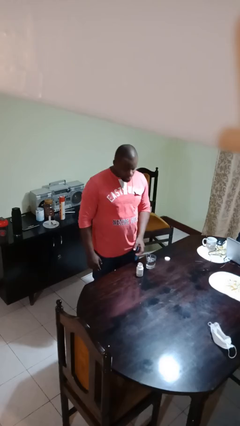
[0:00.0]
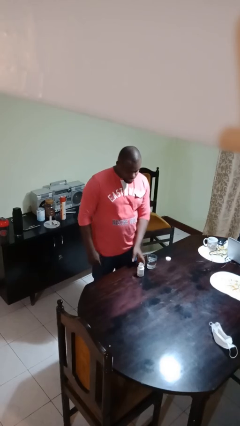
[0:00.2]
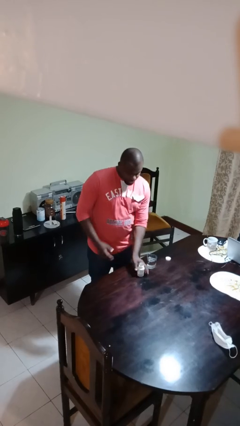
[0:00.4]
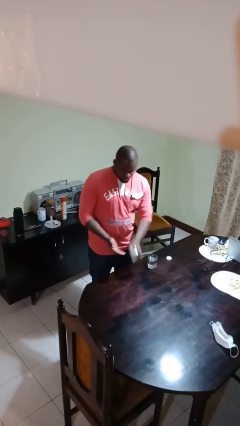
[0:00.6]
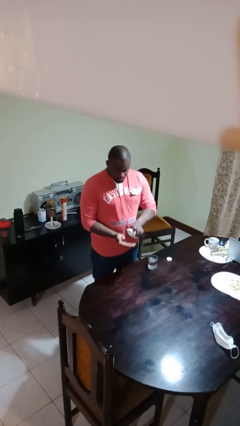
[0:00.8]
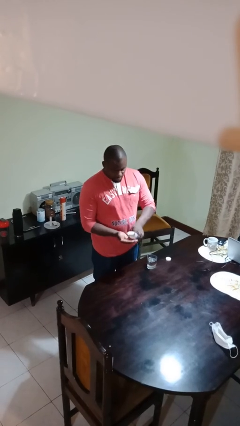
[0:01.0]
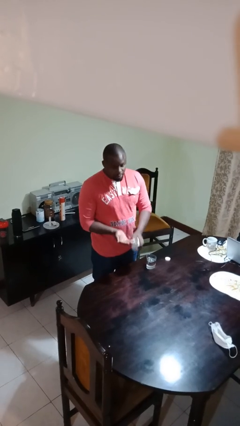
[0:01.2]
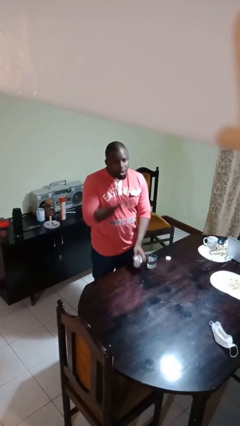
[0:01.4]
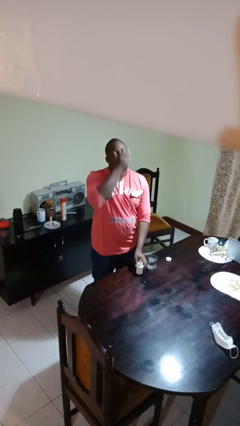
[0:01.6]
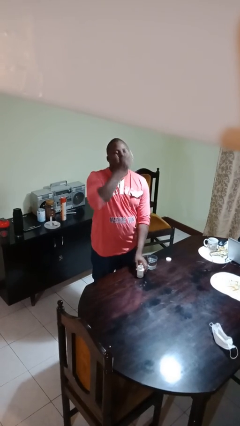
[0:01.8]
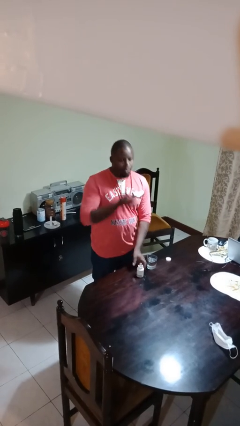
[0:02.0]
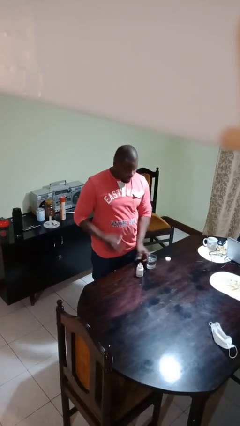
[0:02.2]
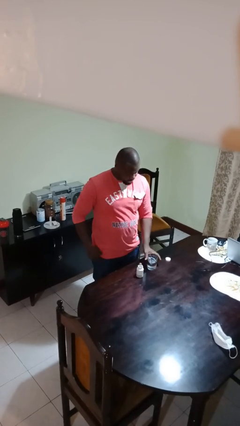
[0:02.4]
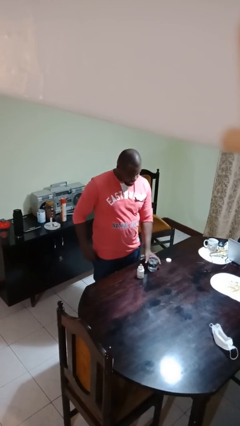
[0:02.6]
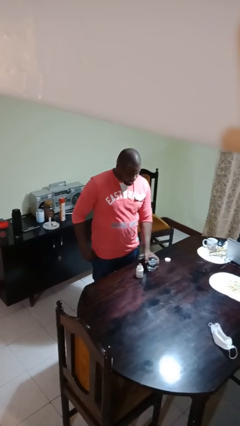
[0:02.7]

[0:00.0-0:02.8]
person takes medicine pills

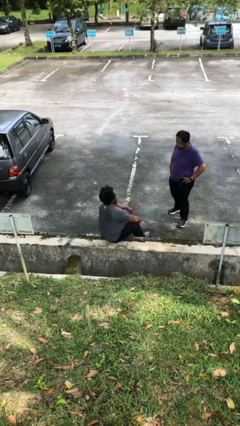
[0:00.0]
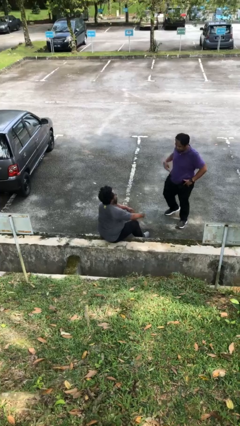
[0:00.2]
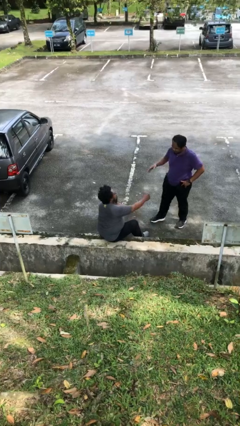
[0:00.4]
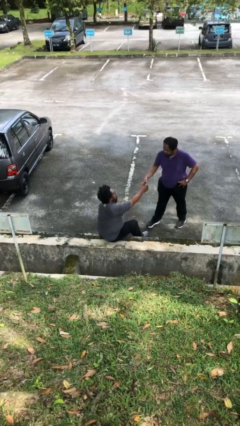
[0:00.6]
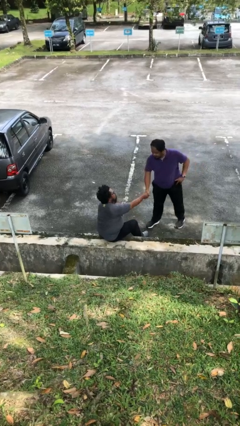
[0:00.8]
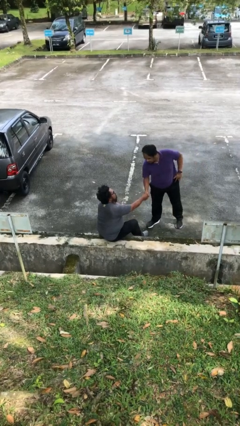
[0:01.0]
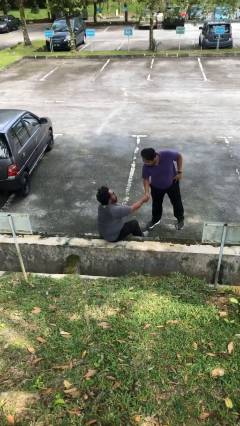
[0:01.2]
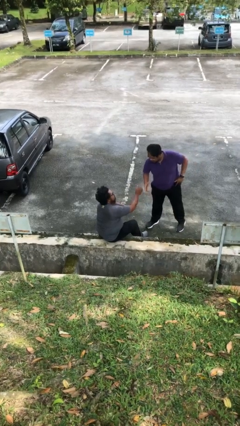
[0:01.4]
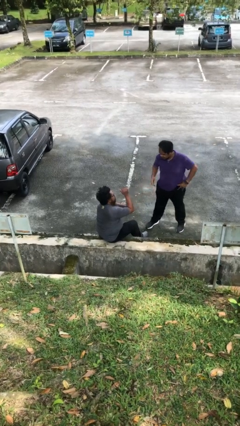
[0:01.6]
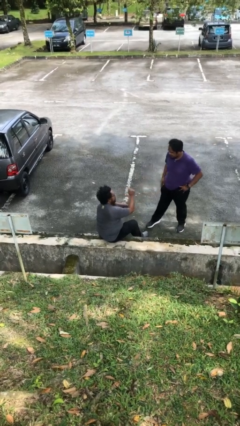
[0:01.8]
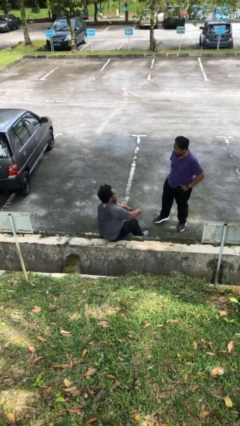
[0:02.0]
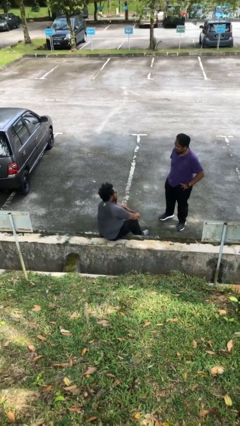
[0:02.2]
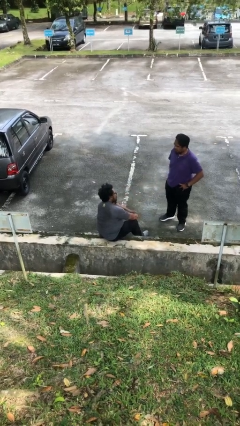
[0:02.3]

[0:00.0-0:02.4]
person shakes hand

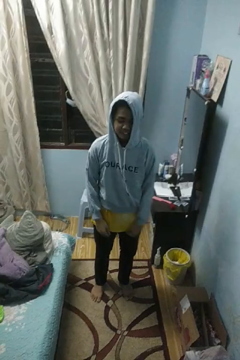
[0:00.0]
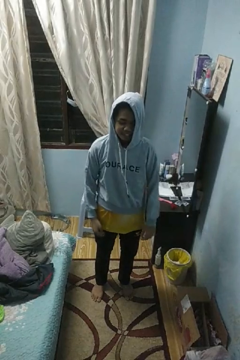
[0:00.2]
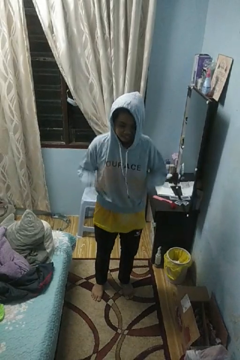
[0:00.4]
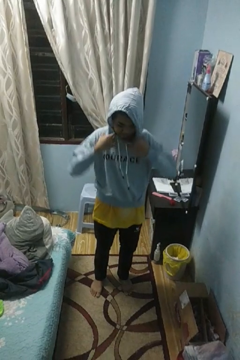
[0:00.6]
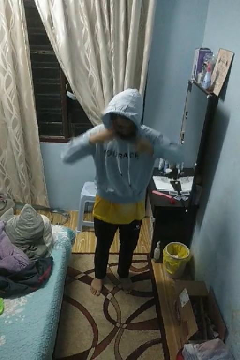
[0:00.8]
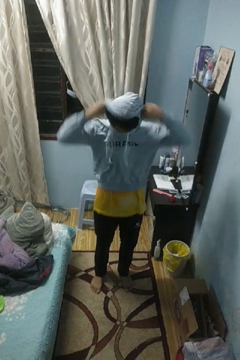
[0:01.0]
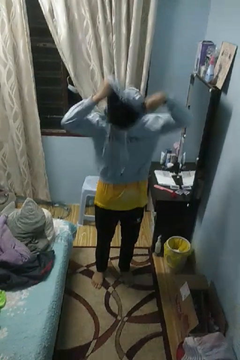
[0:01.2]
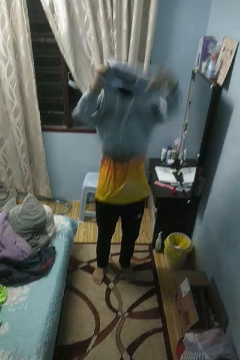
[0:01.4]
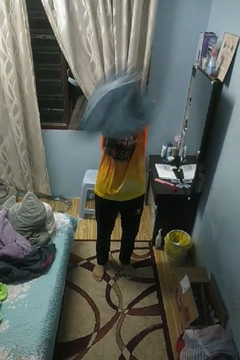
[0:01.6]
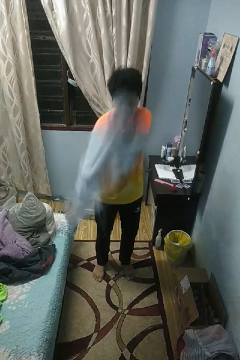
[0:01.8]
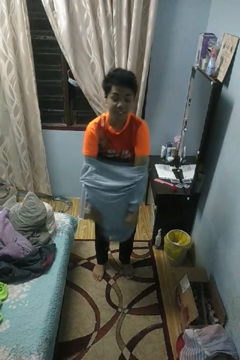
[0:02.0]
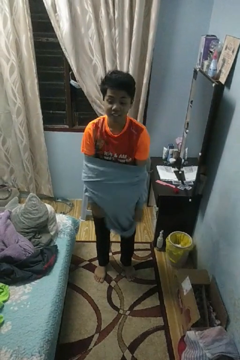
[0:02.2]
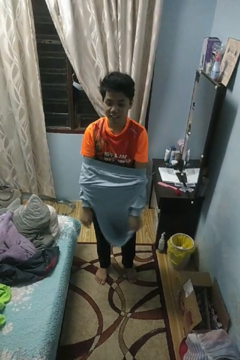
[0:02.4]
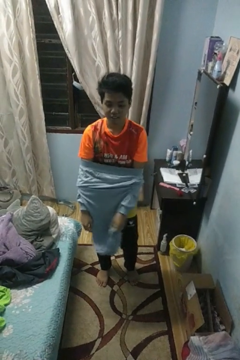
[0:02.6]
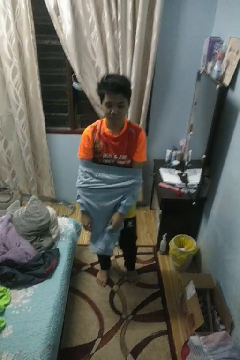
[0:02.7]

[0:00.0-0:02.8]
person takes off hoodie

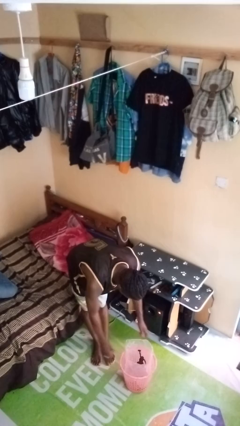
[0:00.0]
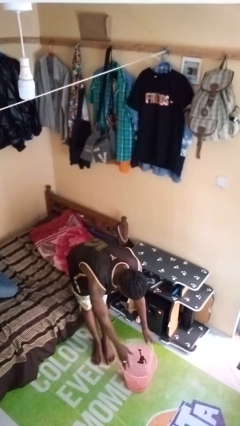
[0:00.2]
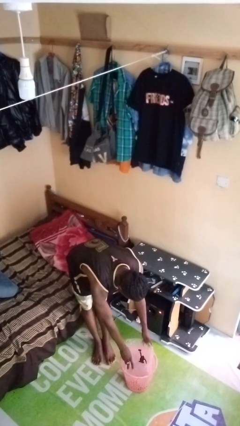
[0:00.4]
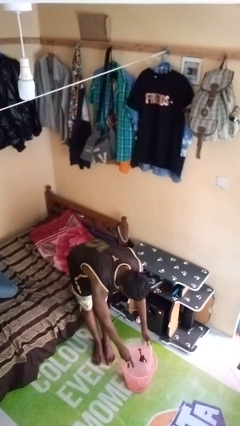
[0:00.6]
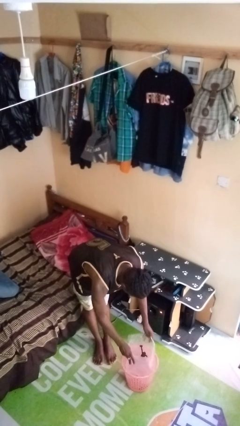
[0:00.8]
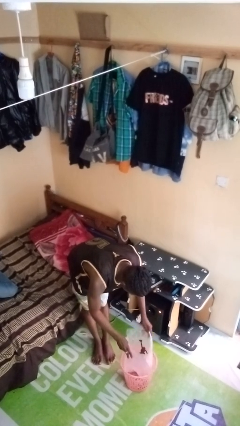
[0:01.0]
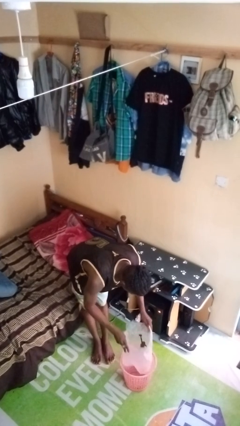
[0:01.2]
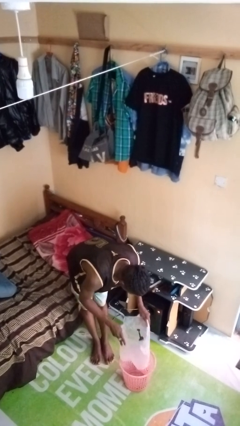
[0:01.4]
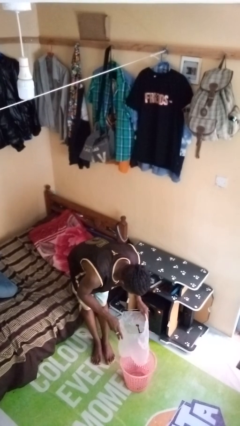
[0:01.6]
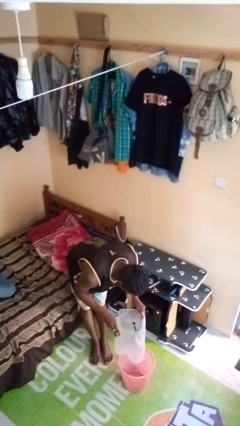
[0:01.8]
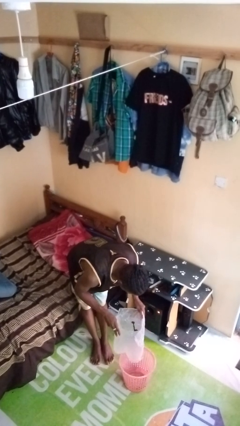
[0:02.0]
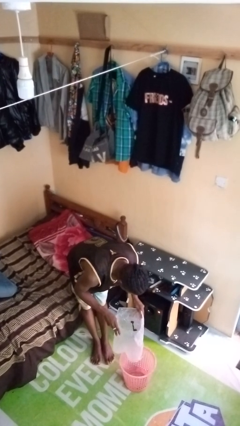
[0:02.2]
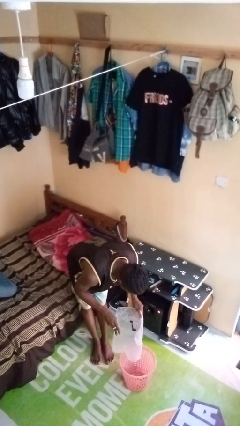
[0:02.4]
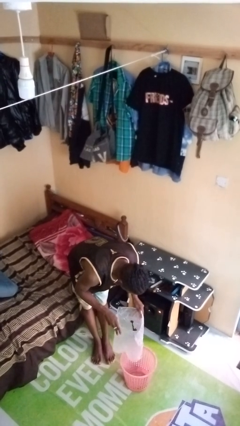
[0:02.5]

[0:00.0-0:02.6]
person removes trashbag from trashcan

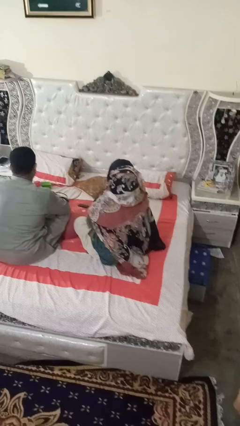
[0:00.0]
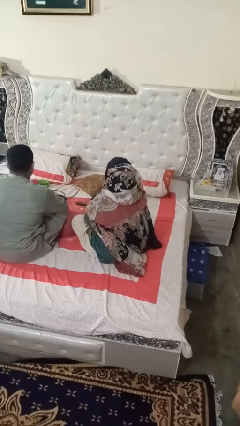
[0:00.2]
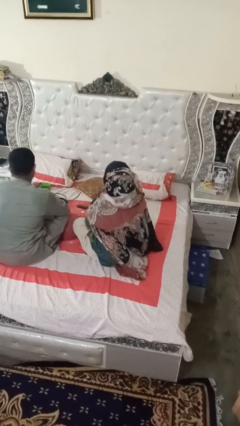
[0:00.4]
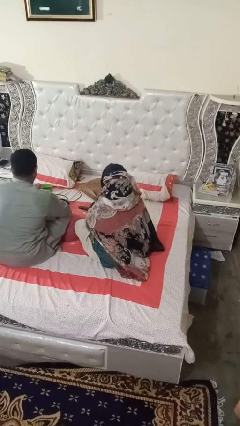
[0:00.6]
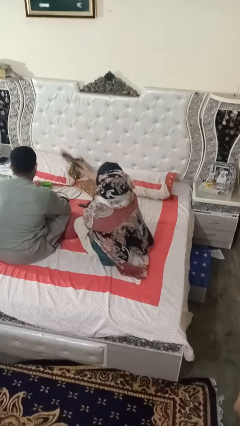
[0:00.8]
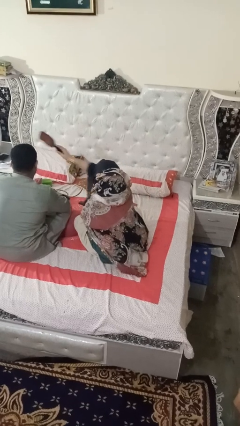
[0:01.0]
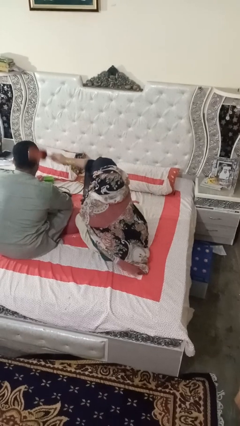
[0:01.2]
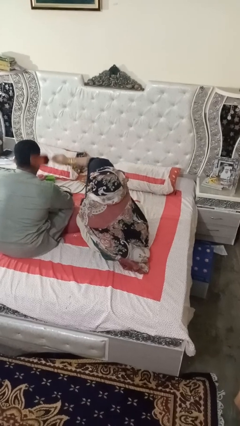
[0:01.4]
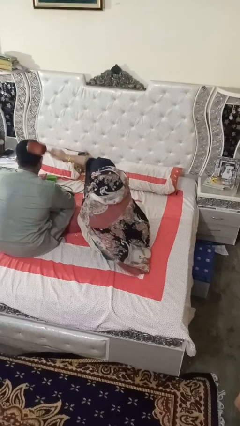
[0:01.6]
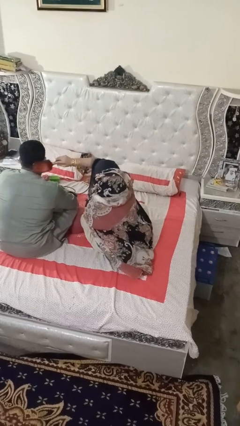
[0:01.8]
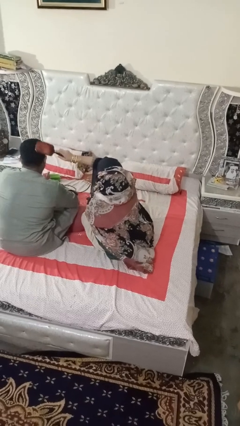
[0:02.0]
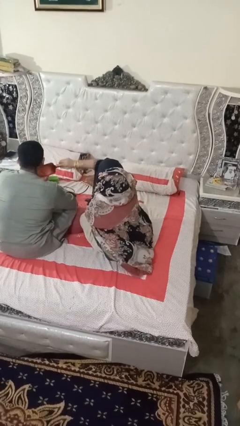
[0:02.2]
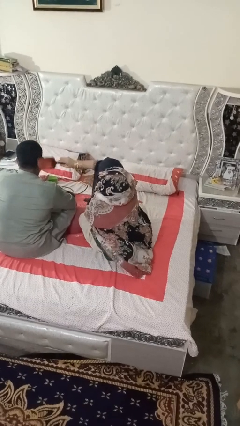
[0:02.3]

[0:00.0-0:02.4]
person brushes hair of person

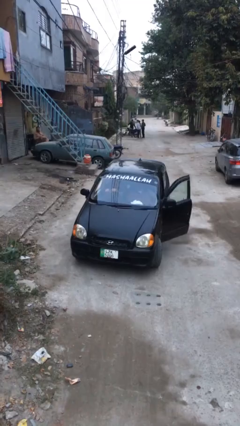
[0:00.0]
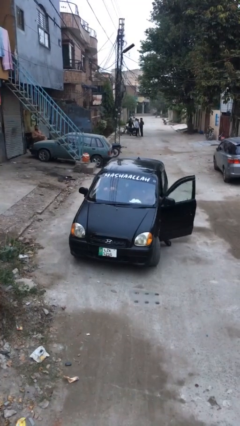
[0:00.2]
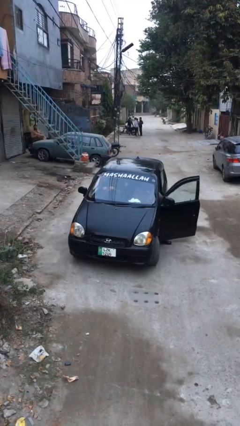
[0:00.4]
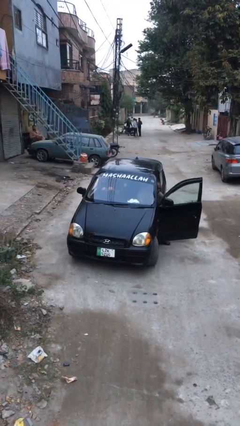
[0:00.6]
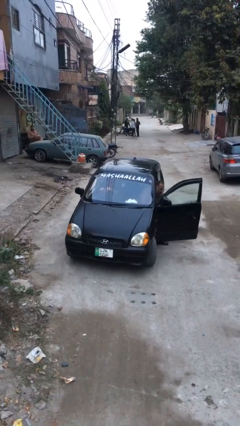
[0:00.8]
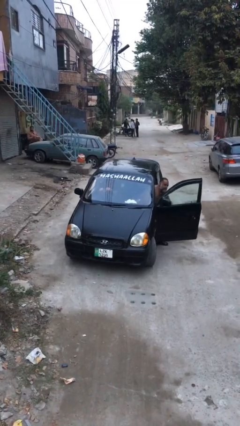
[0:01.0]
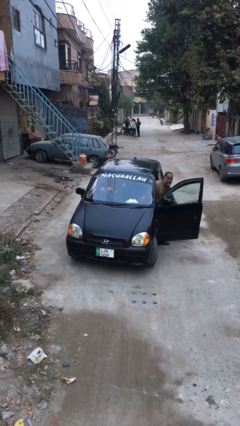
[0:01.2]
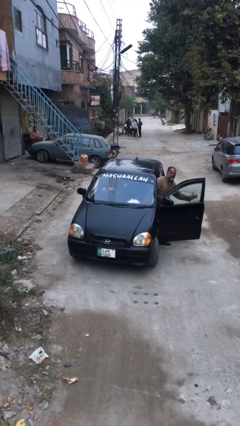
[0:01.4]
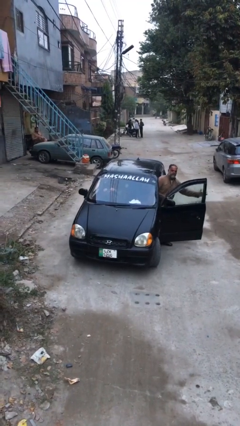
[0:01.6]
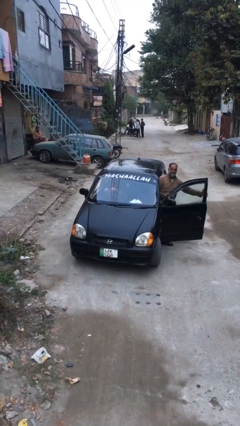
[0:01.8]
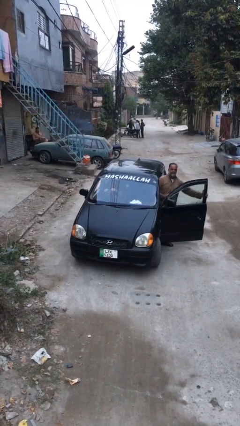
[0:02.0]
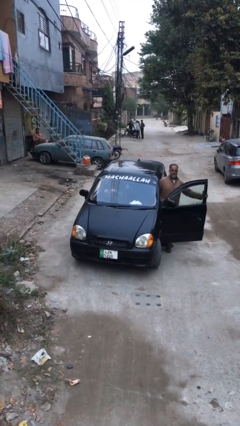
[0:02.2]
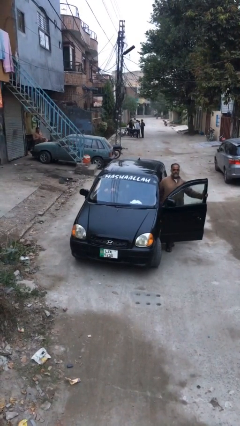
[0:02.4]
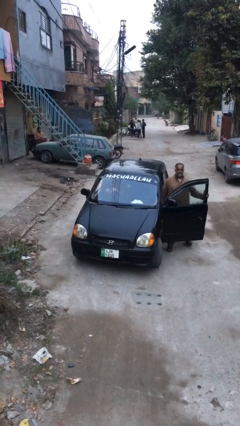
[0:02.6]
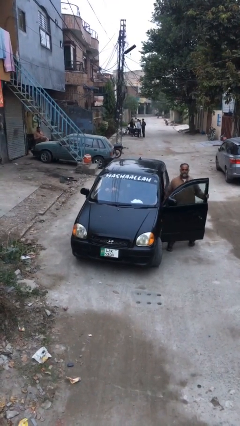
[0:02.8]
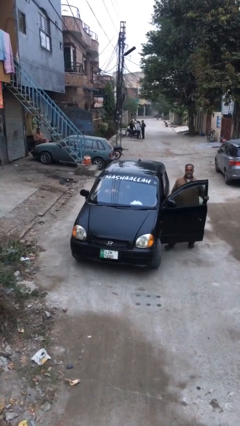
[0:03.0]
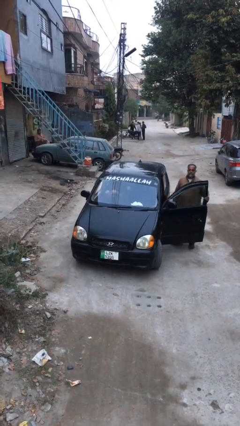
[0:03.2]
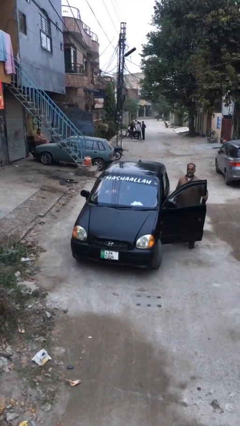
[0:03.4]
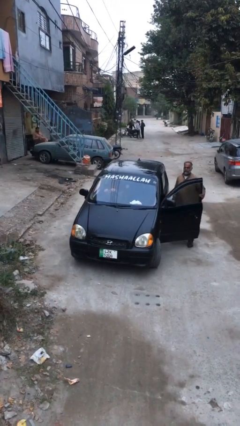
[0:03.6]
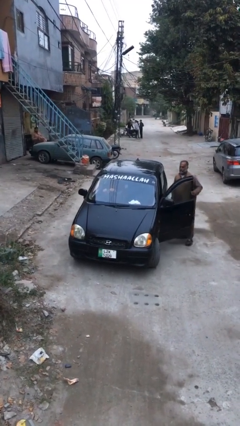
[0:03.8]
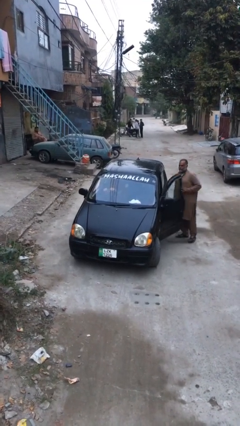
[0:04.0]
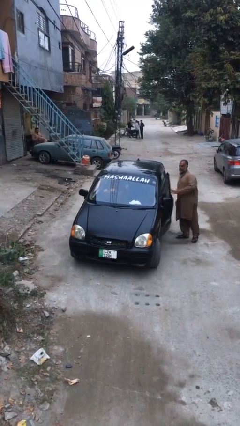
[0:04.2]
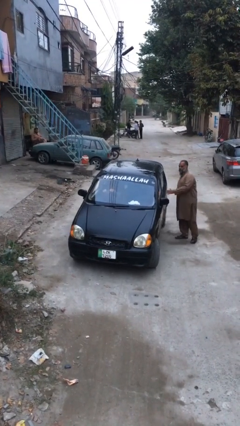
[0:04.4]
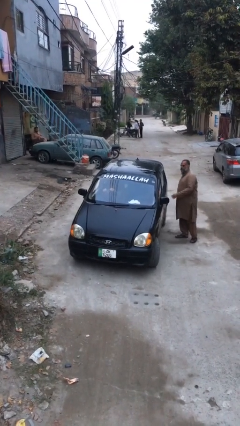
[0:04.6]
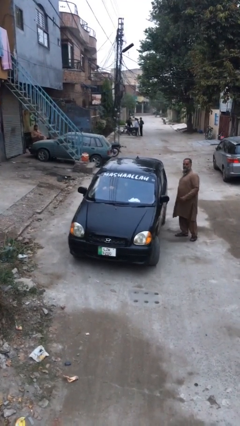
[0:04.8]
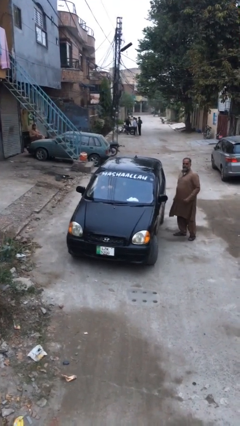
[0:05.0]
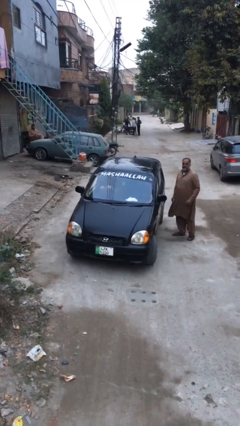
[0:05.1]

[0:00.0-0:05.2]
car drops off person
